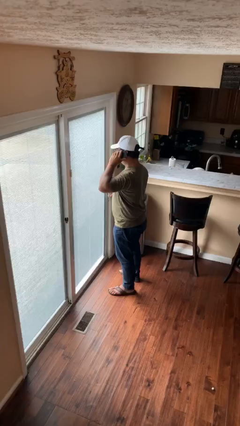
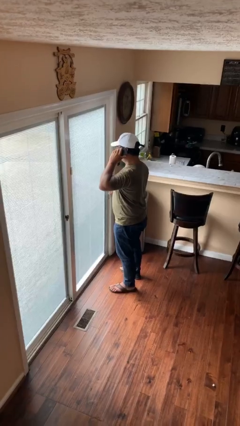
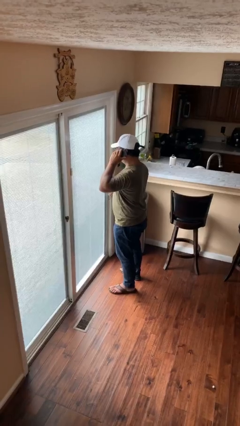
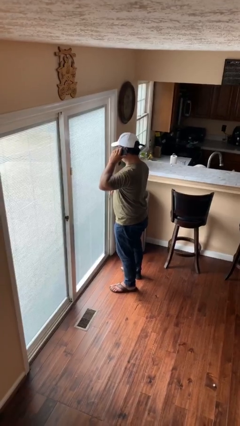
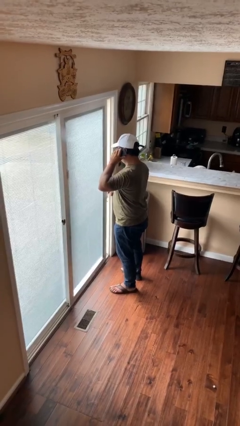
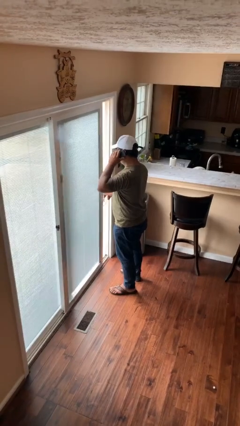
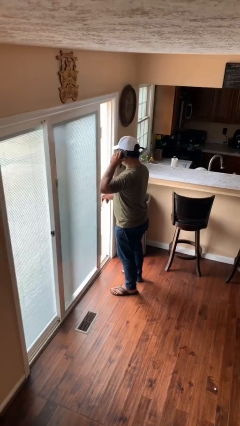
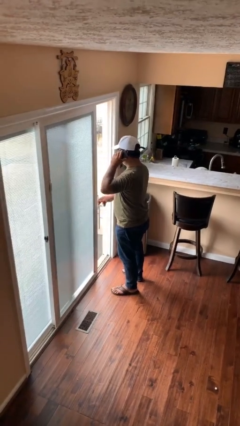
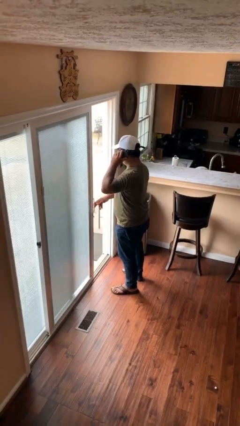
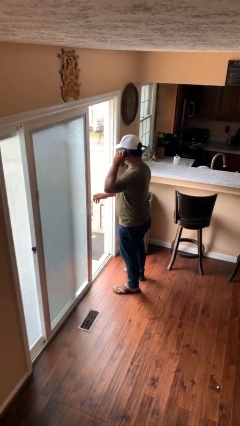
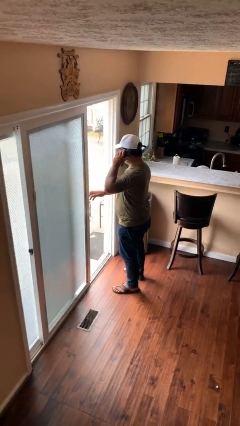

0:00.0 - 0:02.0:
person opens facility door

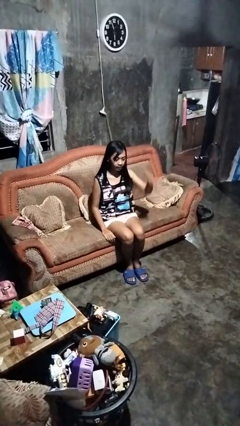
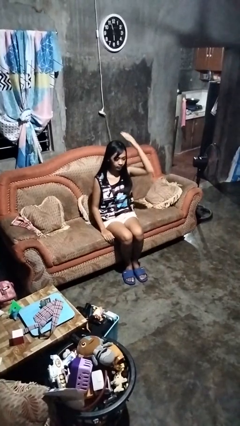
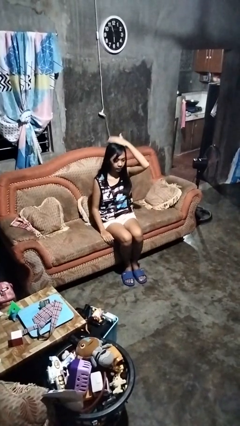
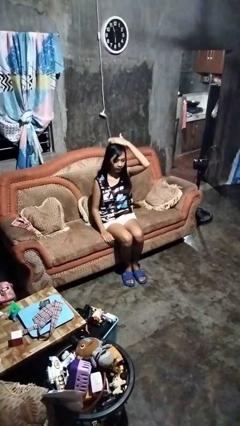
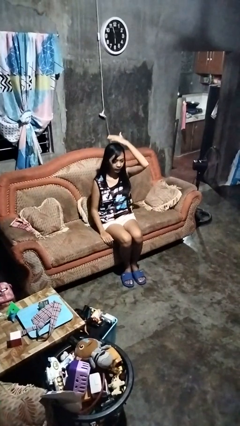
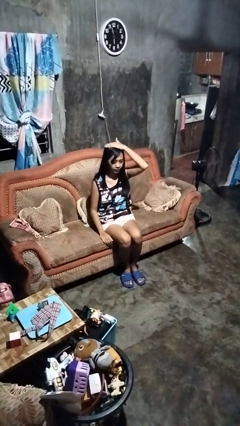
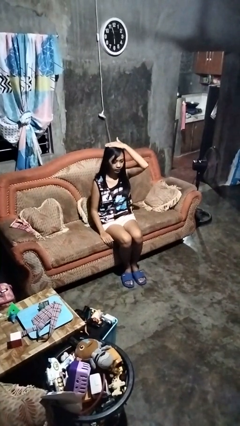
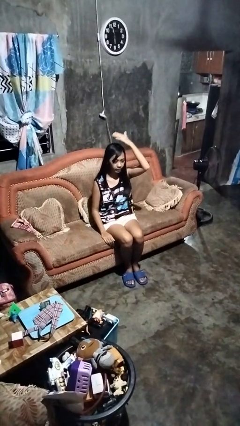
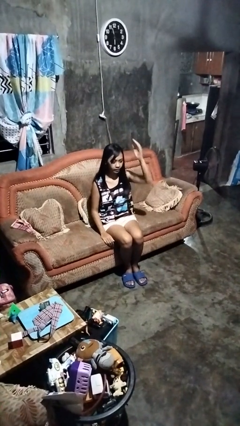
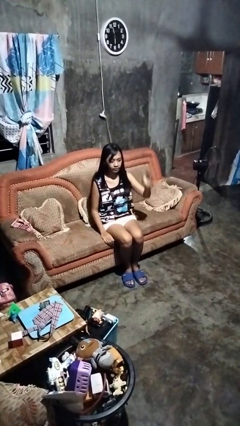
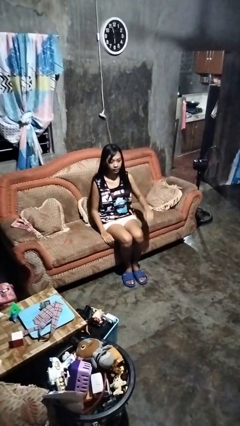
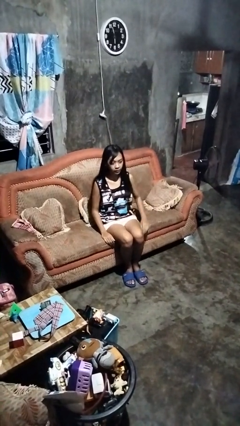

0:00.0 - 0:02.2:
person pats head

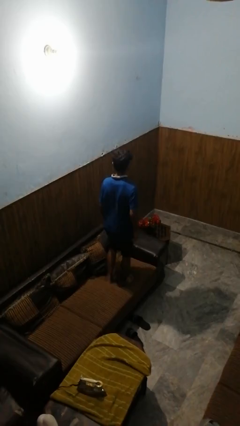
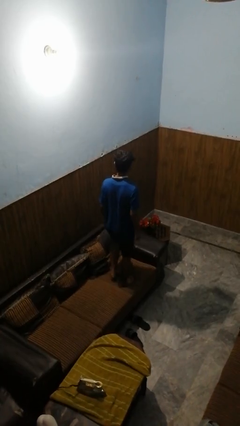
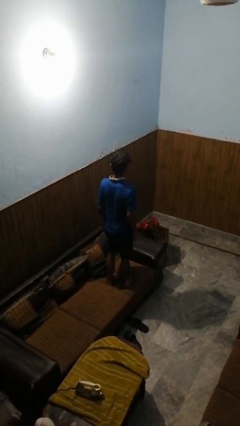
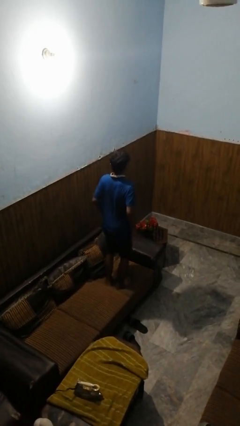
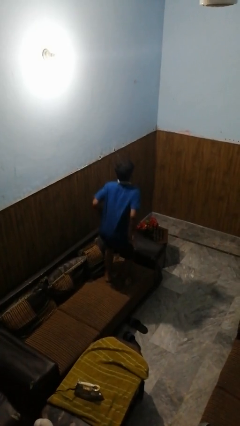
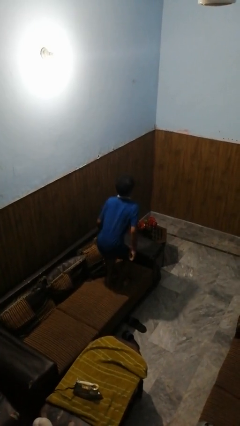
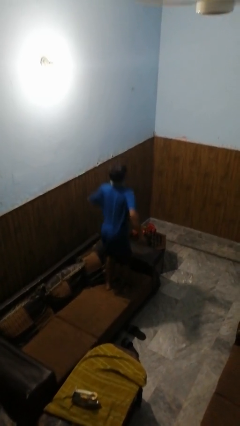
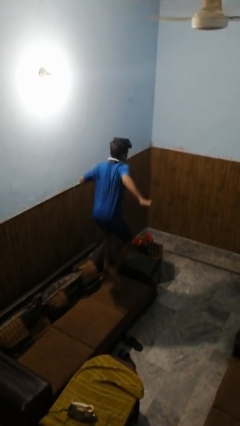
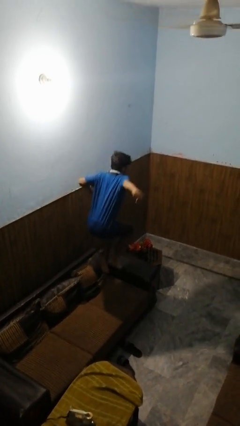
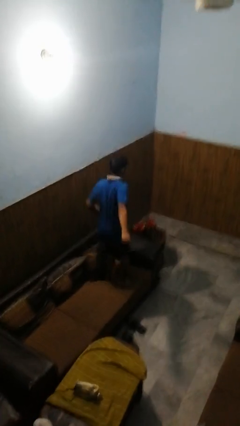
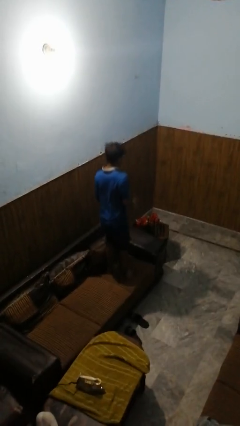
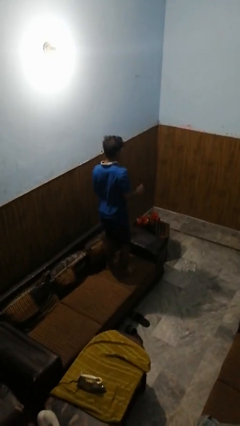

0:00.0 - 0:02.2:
person jumps on couch

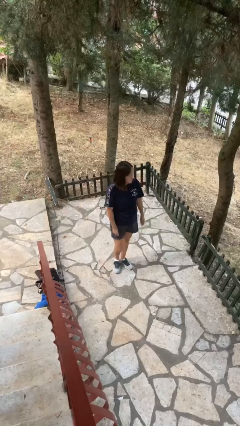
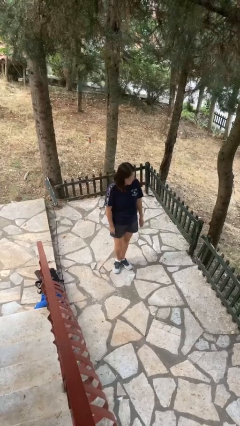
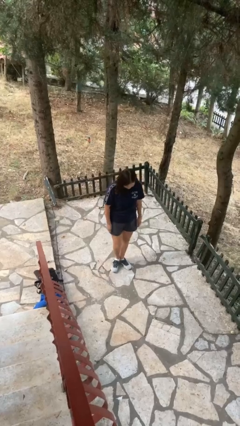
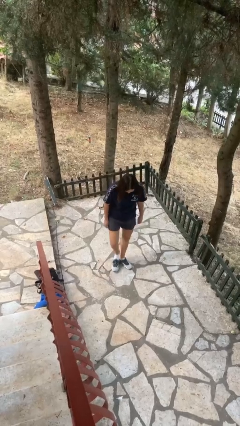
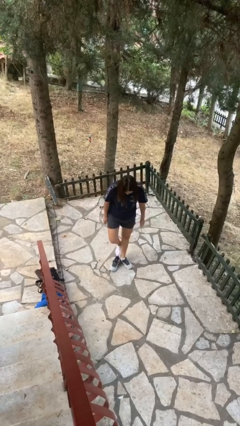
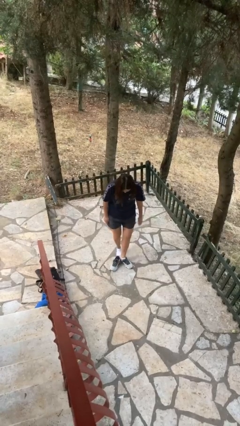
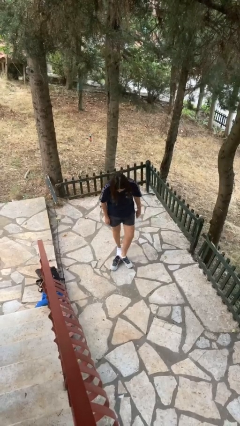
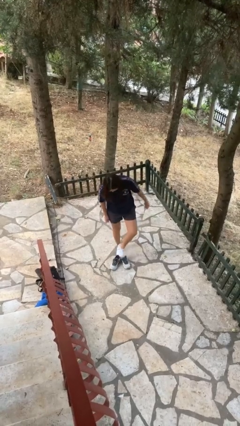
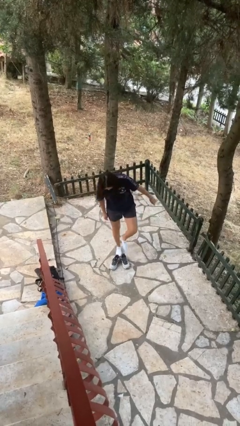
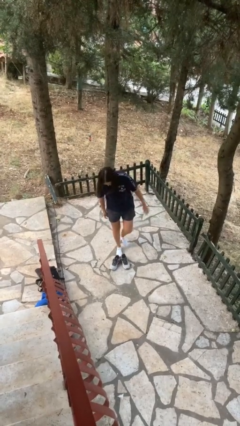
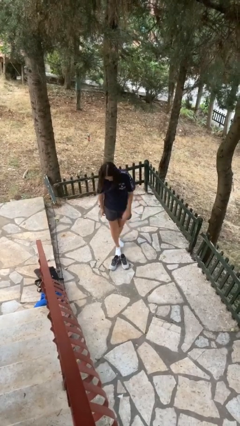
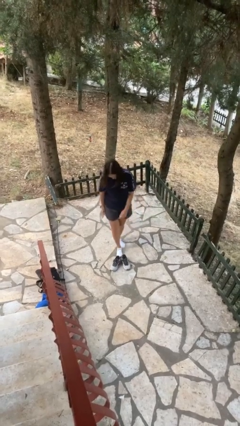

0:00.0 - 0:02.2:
person takes off shoes

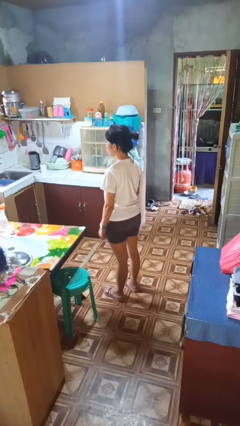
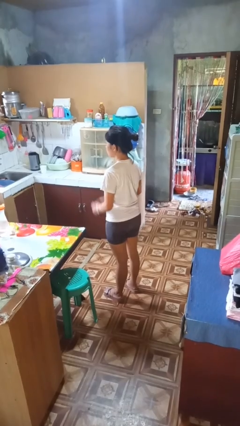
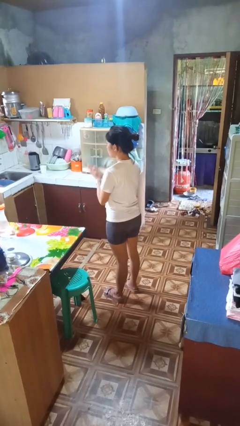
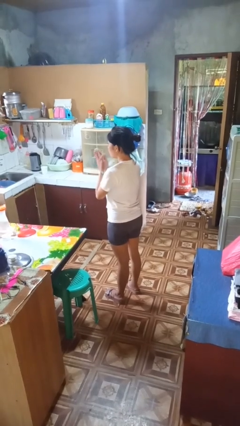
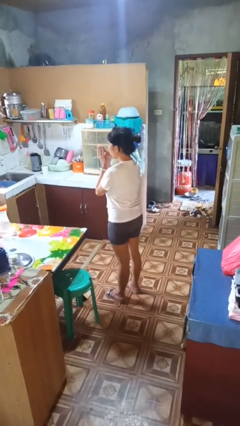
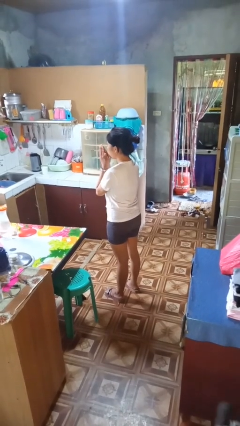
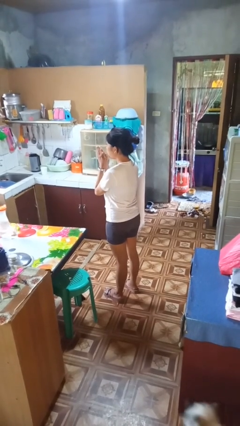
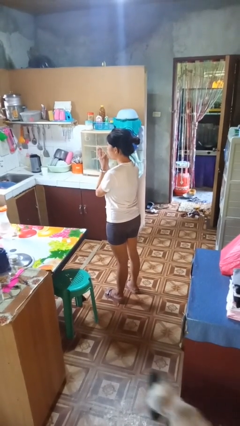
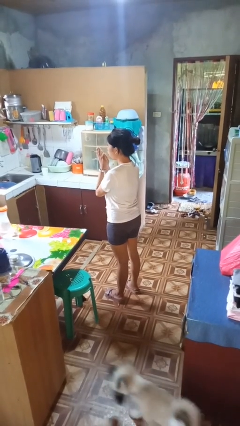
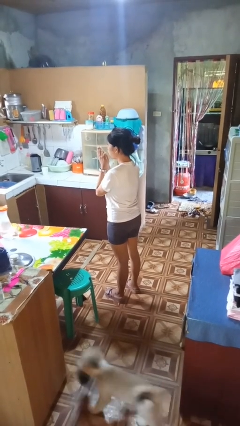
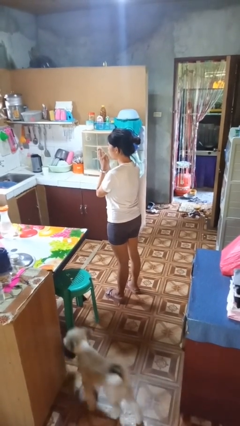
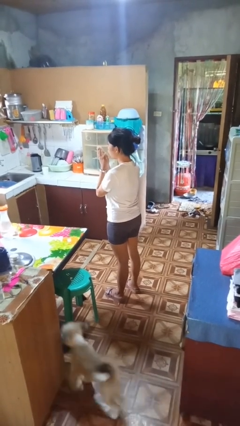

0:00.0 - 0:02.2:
person blows into hands

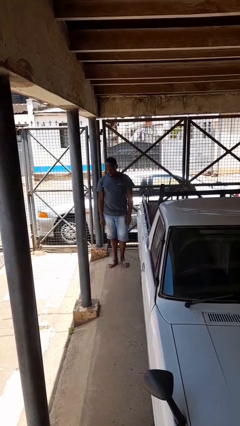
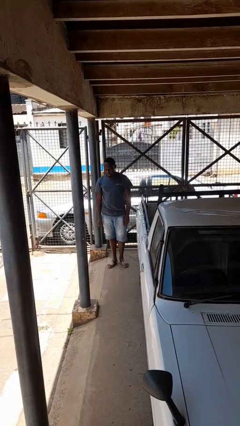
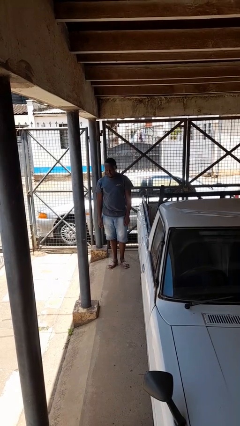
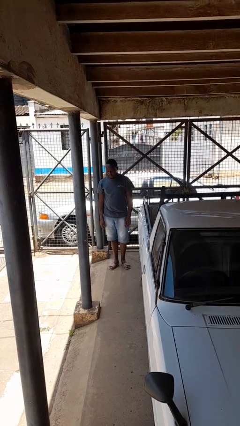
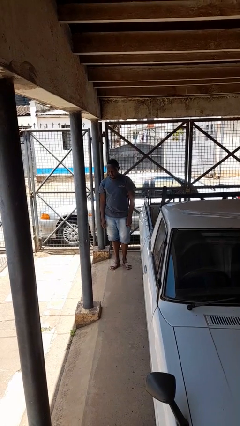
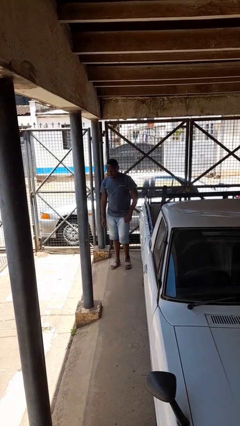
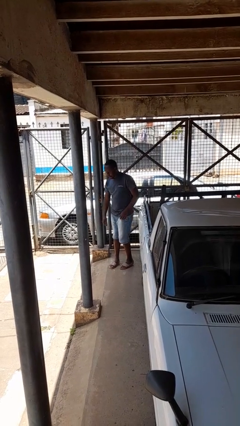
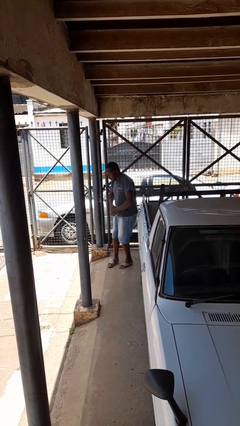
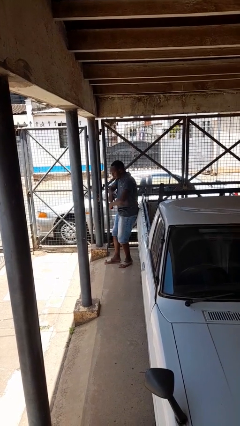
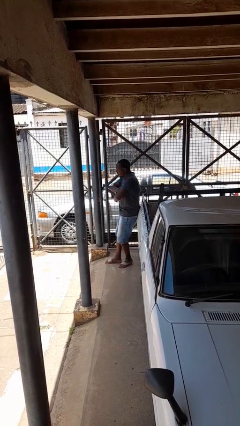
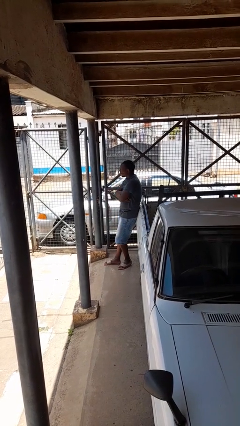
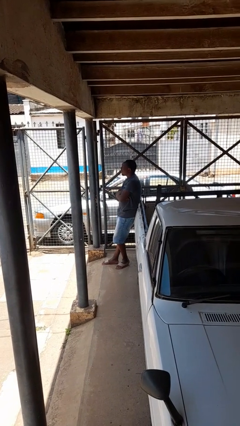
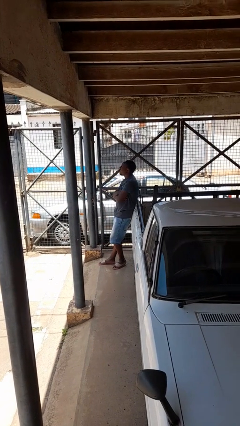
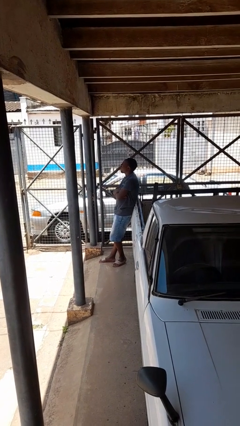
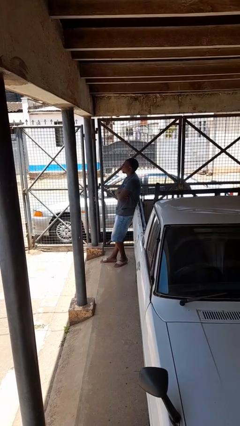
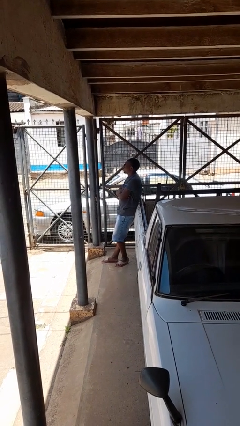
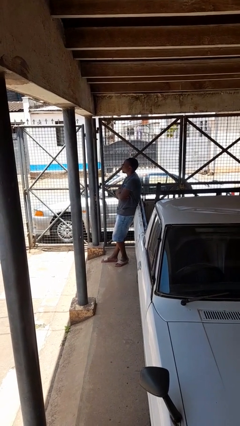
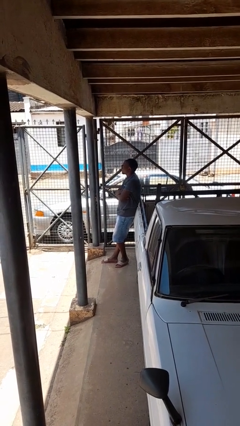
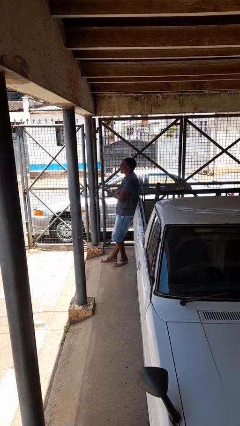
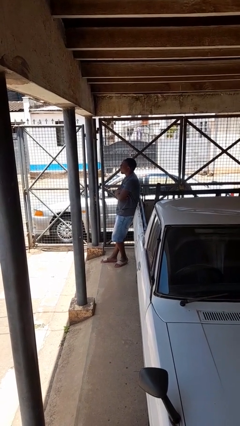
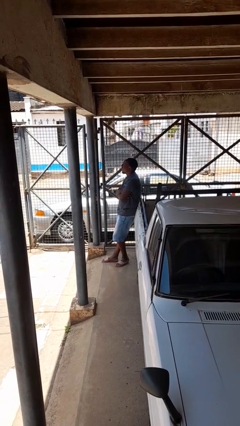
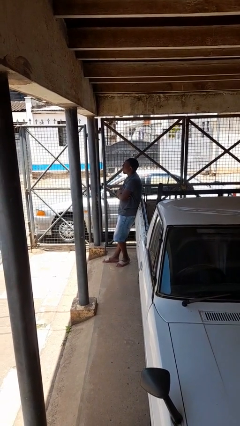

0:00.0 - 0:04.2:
person leans against car

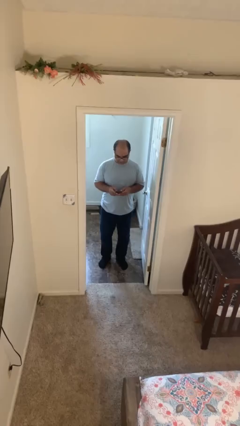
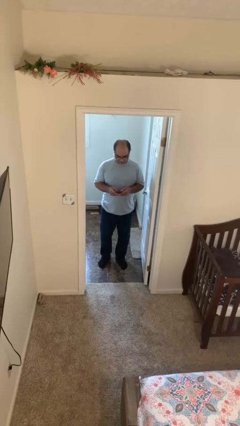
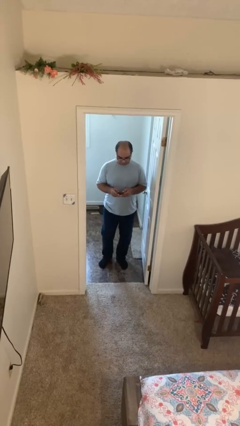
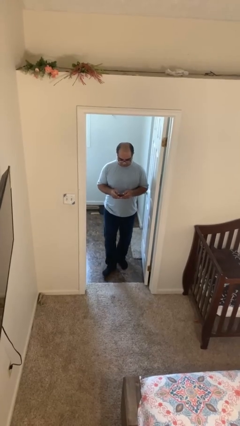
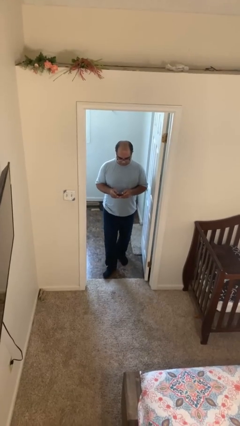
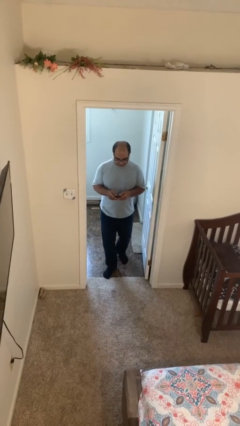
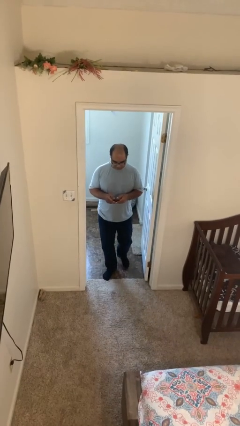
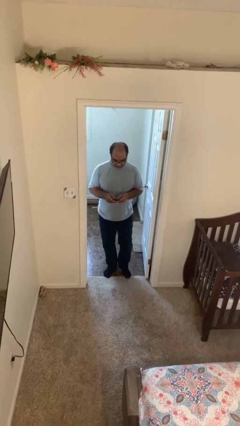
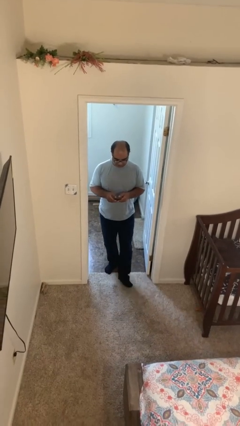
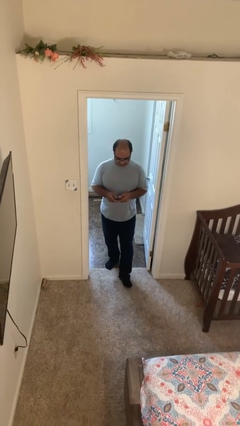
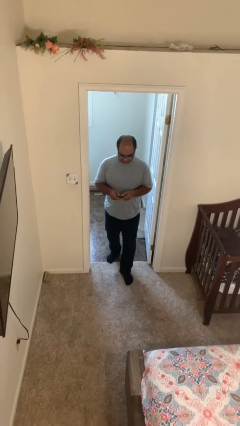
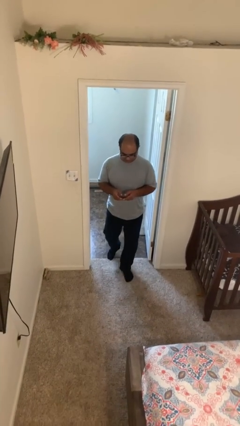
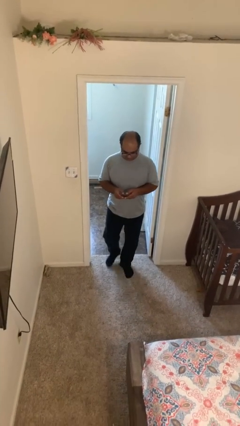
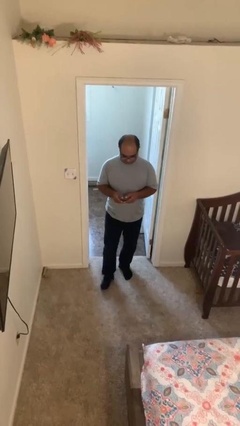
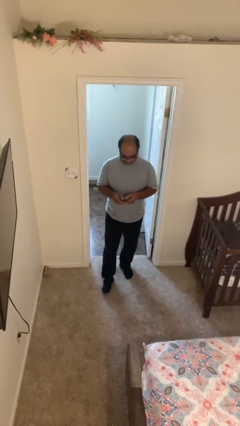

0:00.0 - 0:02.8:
person enters scene through structure
